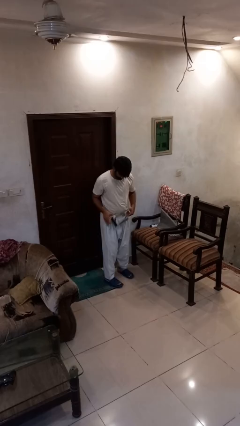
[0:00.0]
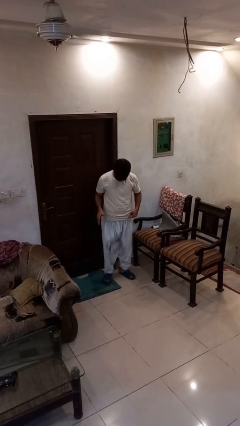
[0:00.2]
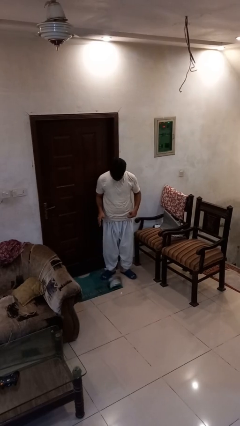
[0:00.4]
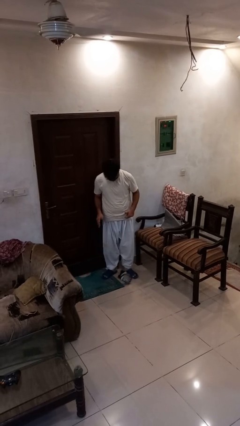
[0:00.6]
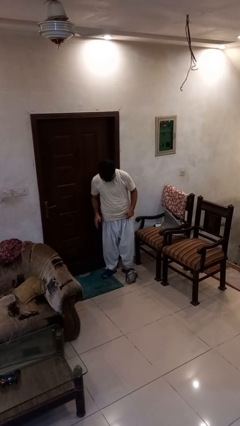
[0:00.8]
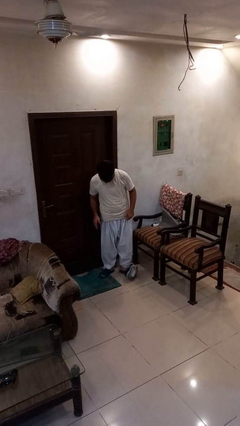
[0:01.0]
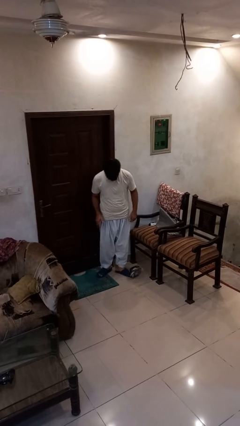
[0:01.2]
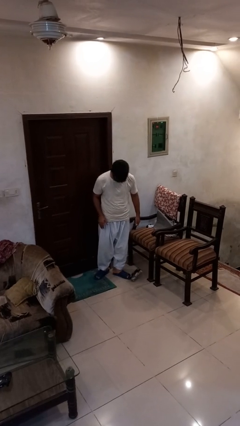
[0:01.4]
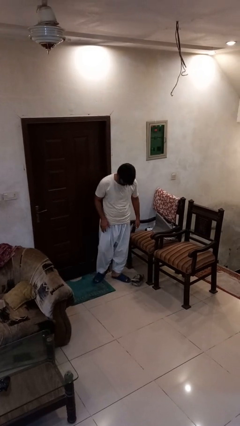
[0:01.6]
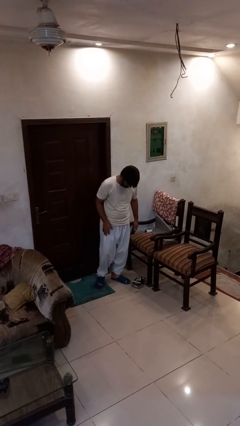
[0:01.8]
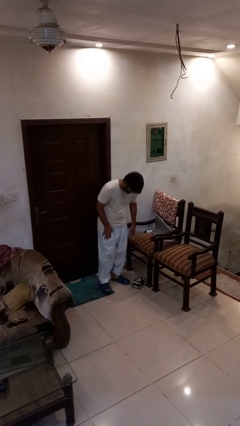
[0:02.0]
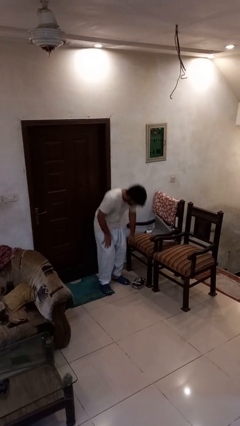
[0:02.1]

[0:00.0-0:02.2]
person drops object

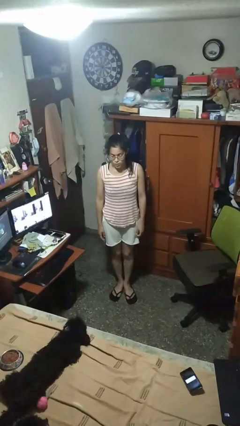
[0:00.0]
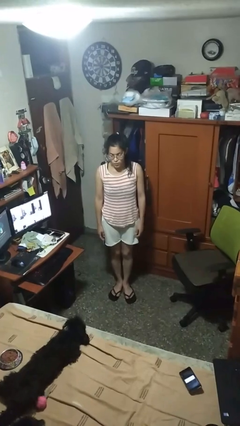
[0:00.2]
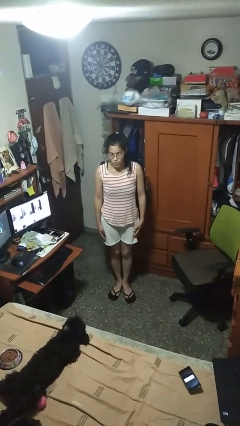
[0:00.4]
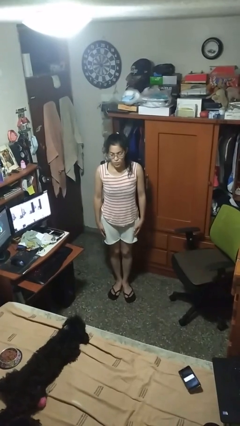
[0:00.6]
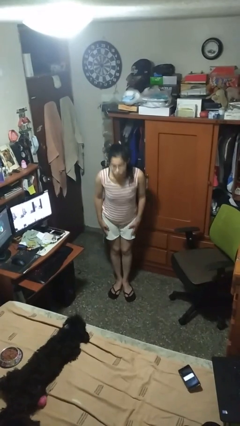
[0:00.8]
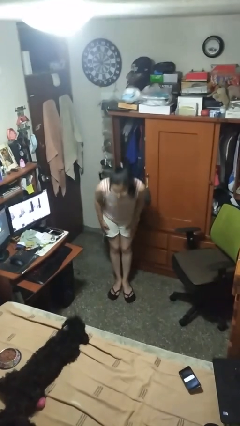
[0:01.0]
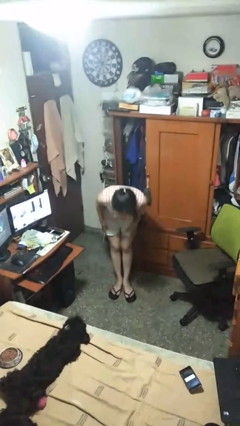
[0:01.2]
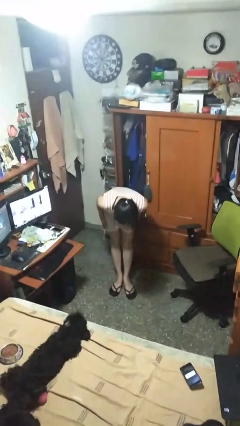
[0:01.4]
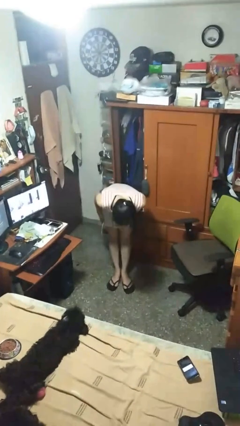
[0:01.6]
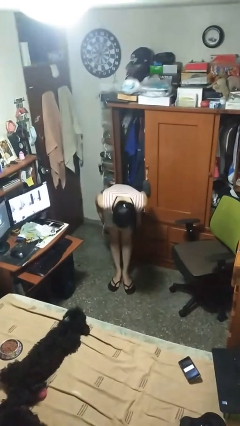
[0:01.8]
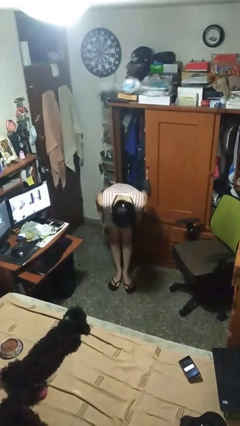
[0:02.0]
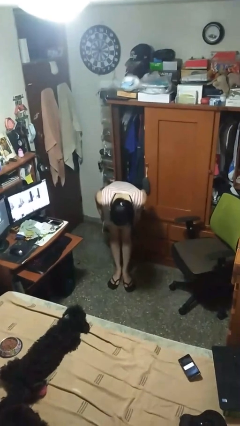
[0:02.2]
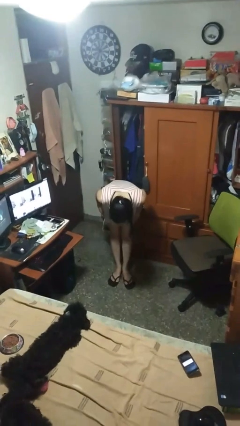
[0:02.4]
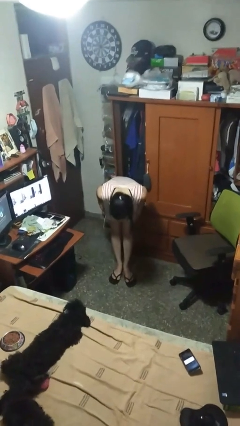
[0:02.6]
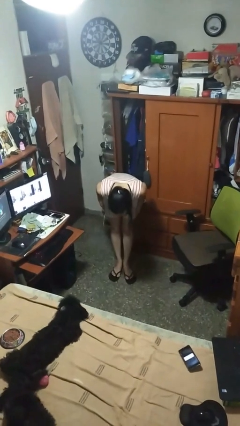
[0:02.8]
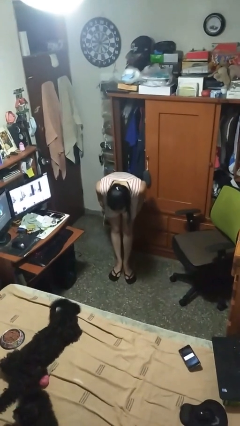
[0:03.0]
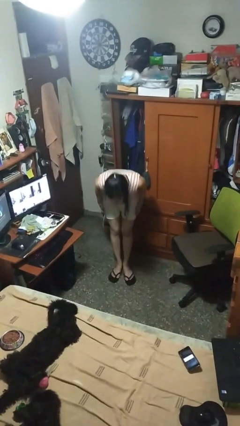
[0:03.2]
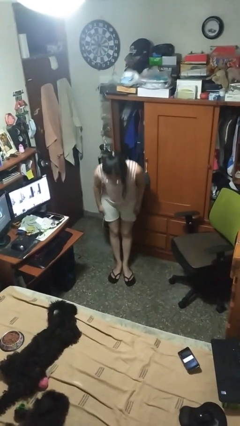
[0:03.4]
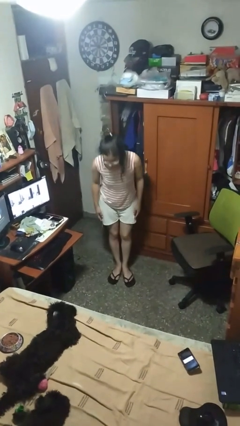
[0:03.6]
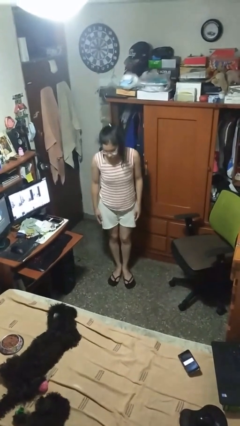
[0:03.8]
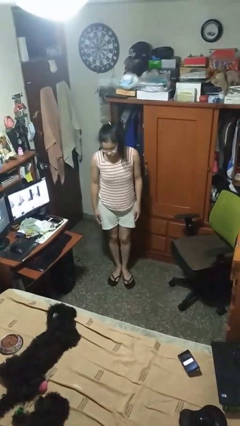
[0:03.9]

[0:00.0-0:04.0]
person bows

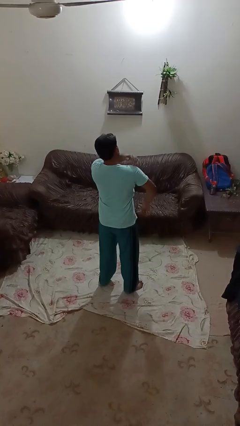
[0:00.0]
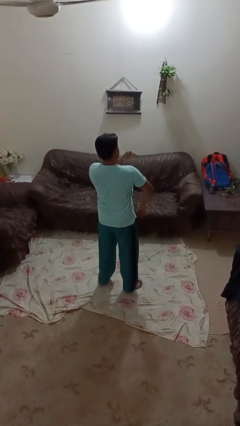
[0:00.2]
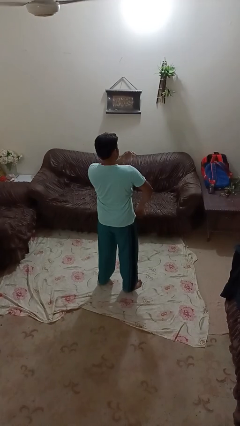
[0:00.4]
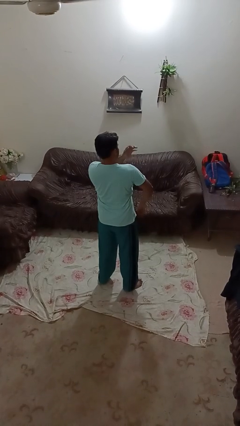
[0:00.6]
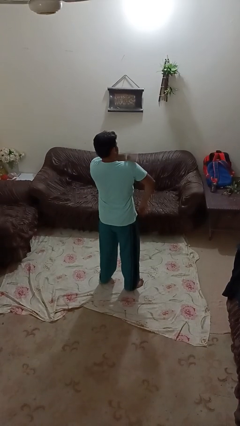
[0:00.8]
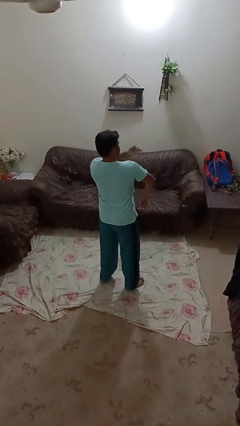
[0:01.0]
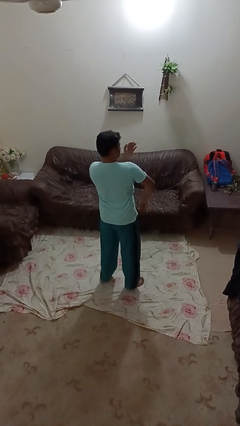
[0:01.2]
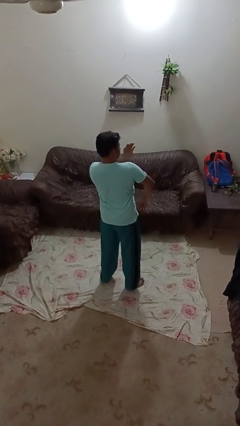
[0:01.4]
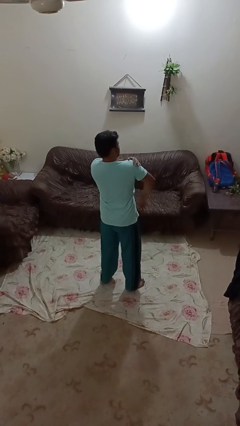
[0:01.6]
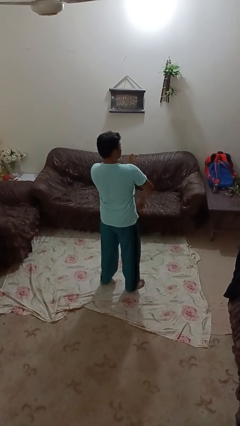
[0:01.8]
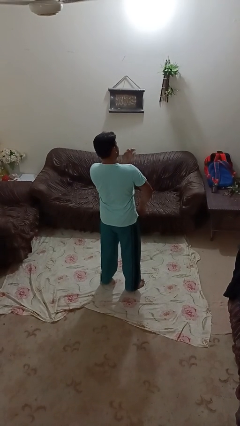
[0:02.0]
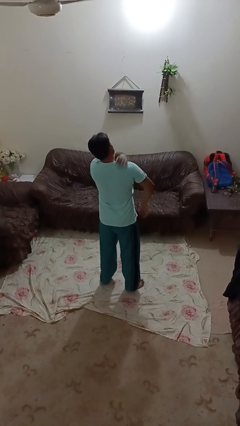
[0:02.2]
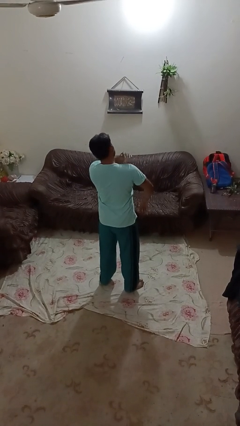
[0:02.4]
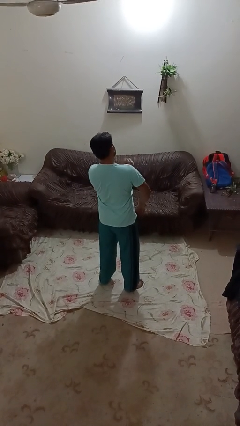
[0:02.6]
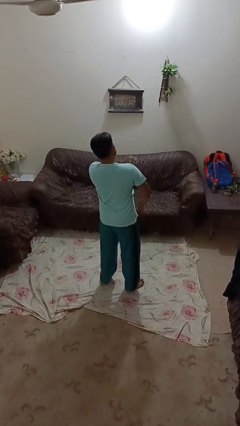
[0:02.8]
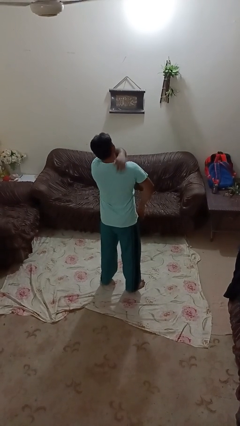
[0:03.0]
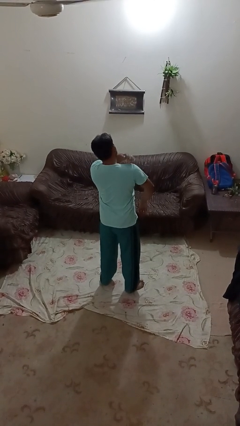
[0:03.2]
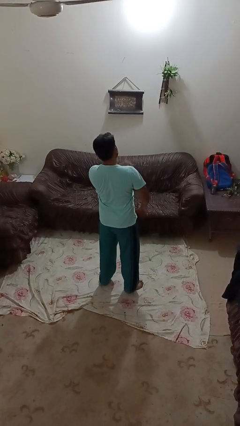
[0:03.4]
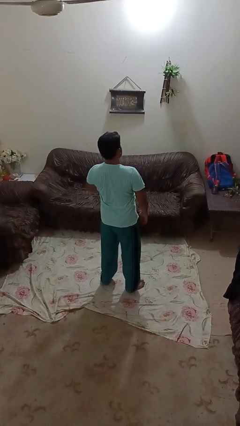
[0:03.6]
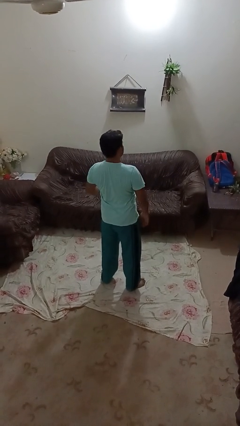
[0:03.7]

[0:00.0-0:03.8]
person swats bug

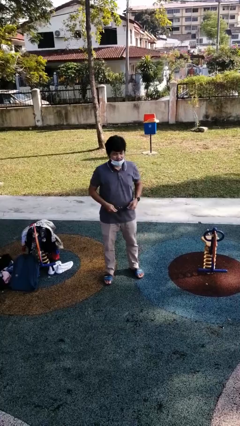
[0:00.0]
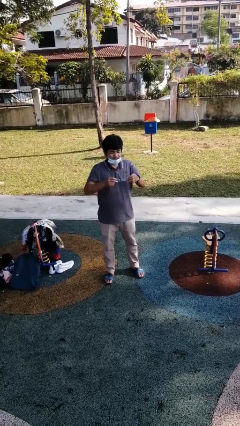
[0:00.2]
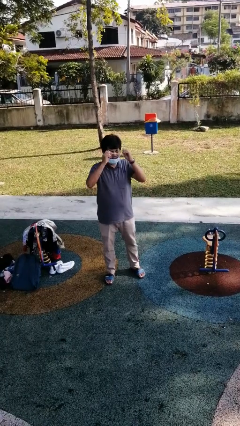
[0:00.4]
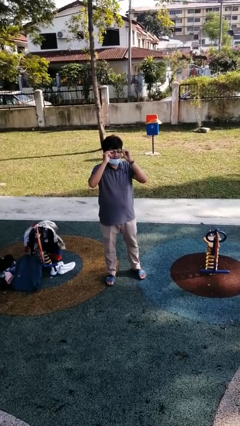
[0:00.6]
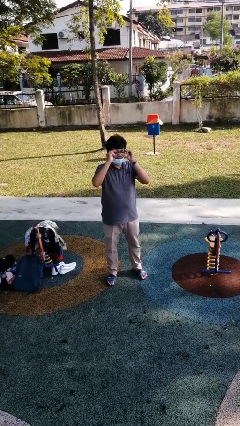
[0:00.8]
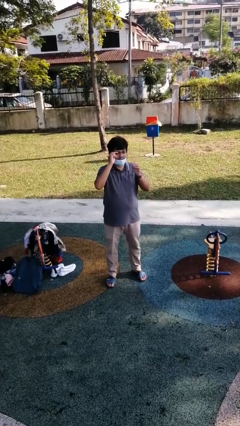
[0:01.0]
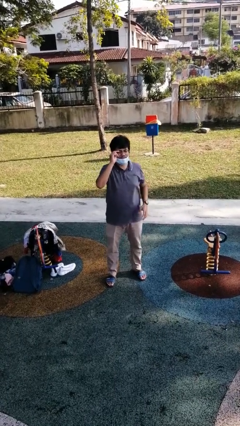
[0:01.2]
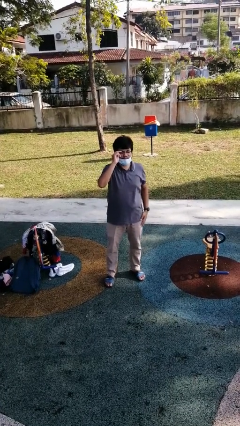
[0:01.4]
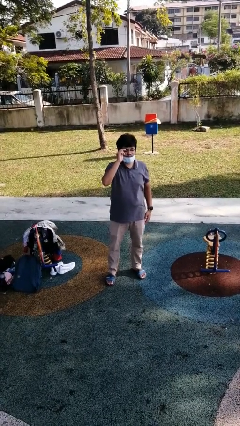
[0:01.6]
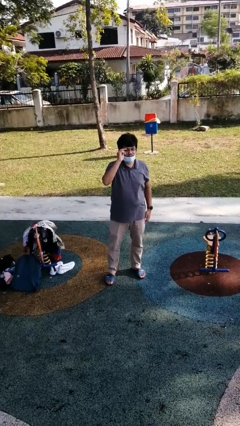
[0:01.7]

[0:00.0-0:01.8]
person puts on glasses

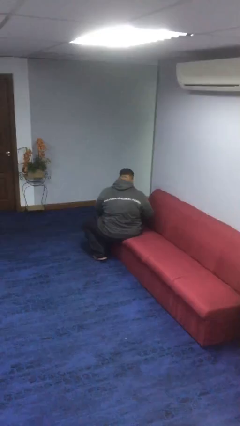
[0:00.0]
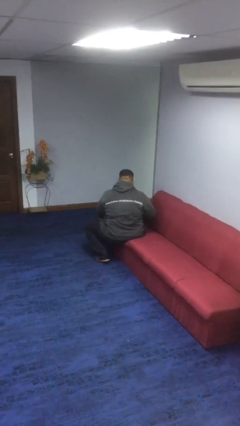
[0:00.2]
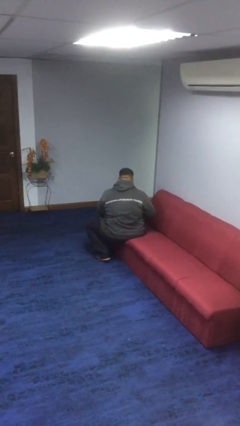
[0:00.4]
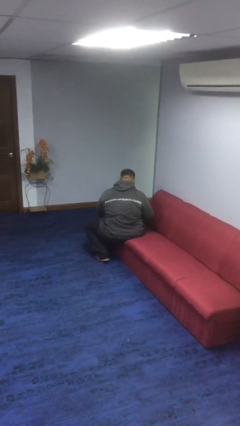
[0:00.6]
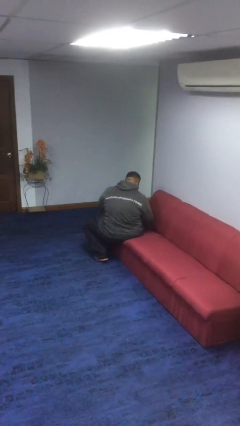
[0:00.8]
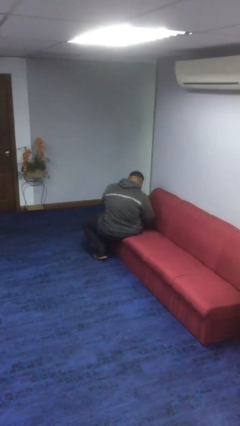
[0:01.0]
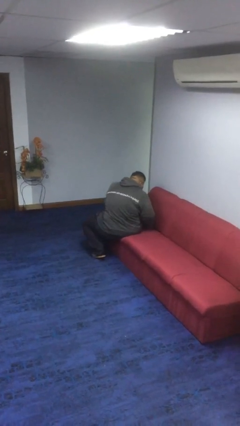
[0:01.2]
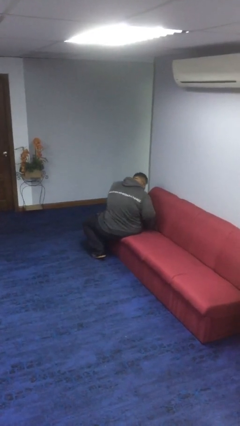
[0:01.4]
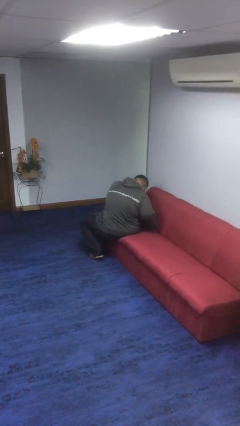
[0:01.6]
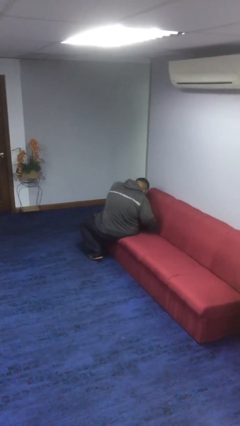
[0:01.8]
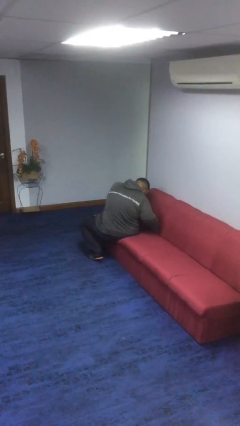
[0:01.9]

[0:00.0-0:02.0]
person searches in couch

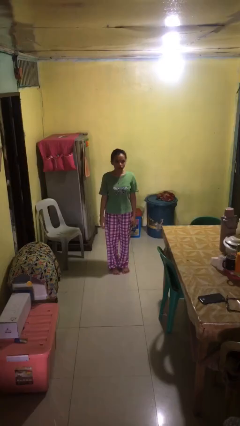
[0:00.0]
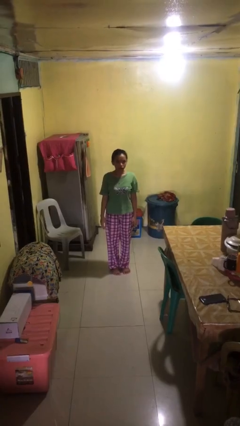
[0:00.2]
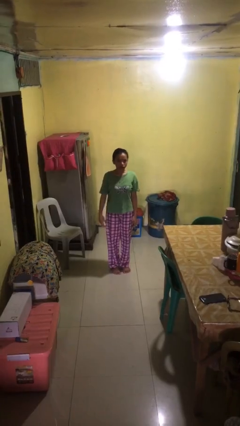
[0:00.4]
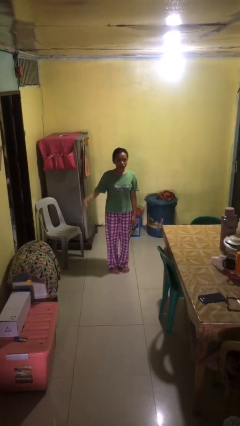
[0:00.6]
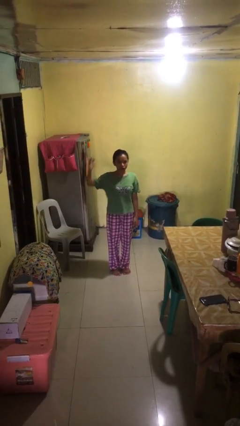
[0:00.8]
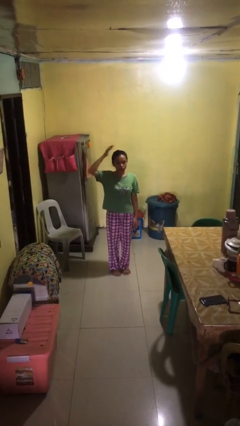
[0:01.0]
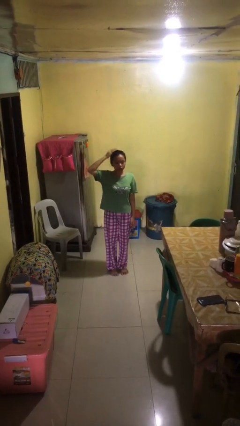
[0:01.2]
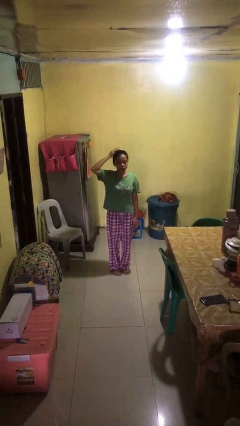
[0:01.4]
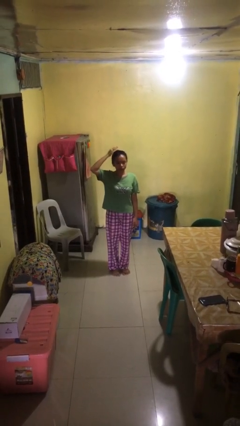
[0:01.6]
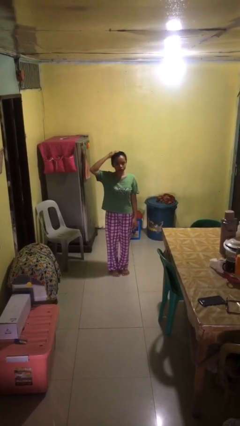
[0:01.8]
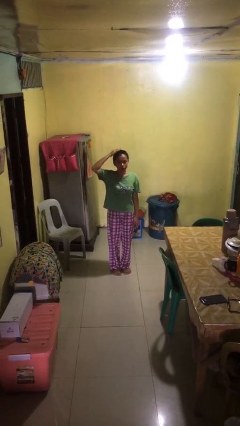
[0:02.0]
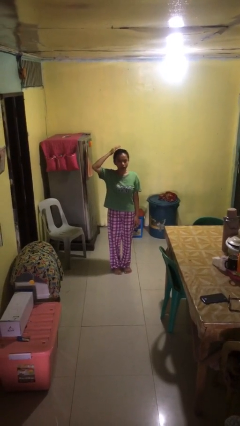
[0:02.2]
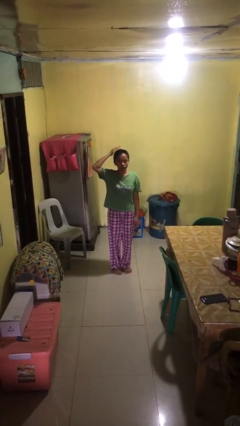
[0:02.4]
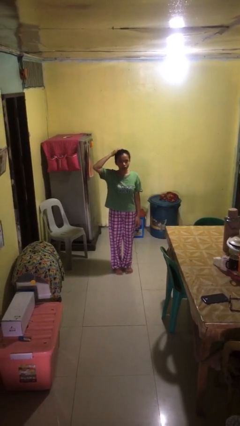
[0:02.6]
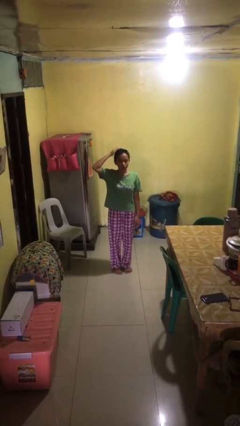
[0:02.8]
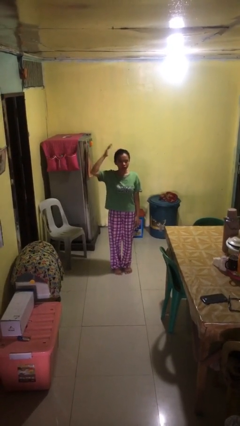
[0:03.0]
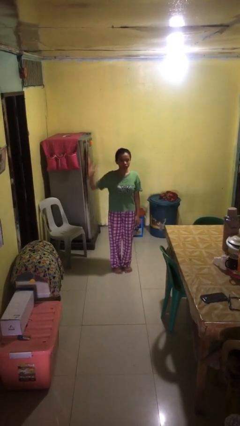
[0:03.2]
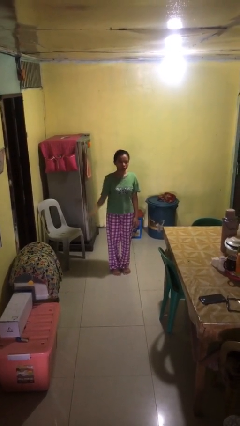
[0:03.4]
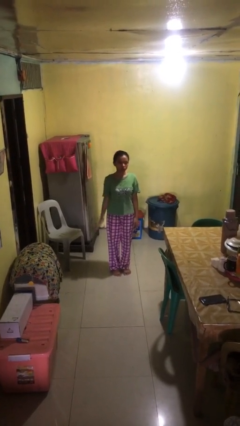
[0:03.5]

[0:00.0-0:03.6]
person pats head
